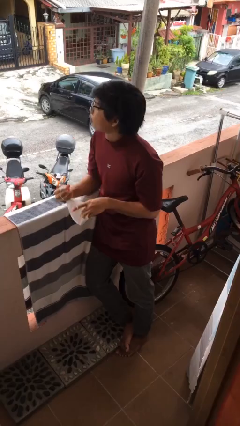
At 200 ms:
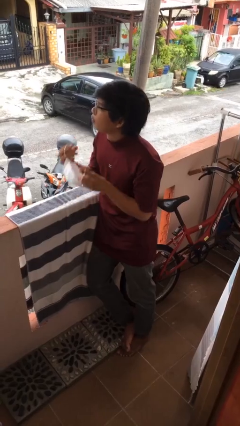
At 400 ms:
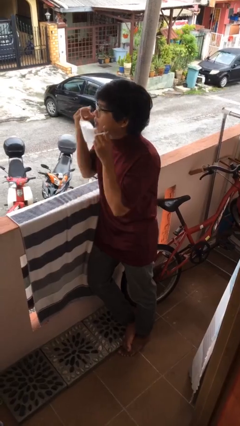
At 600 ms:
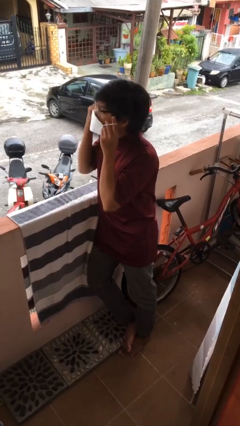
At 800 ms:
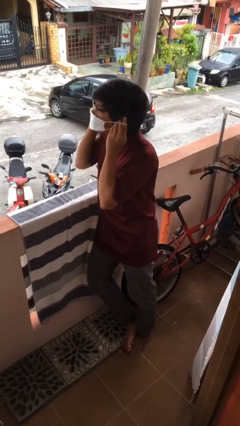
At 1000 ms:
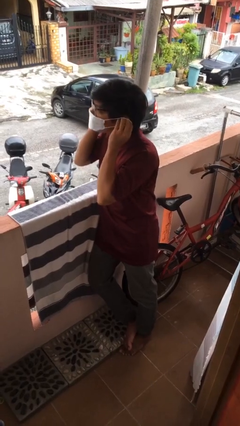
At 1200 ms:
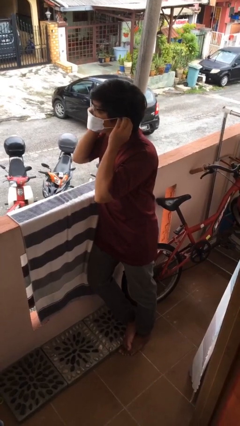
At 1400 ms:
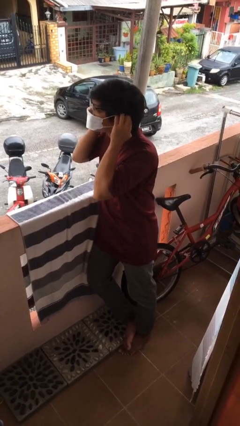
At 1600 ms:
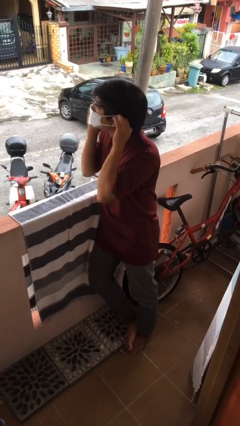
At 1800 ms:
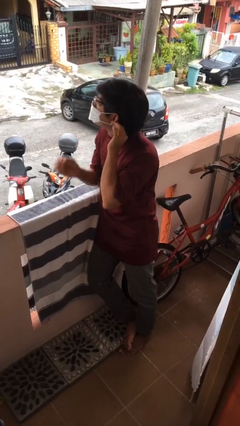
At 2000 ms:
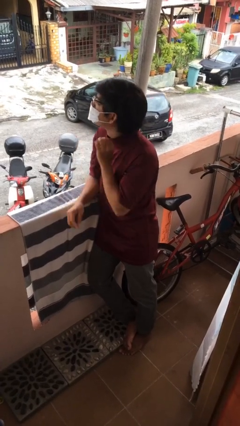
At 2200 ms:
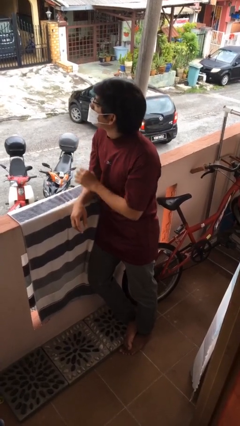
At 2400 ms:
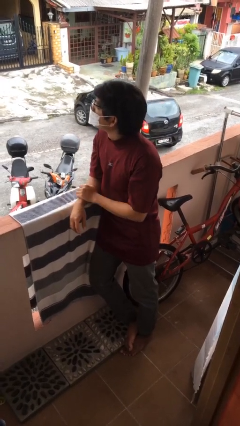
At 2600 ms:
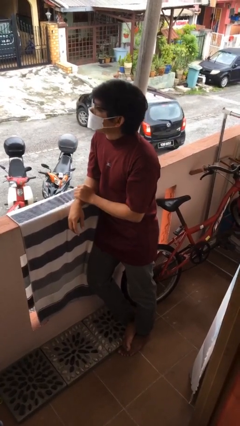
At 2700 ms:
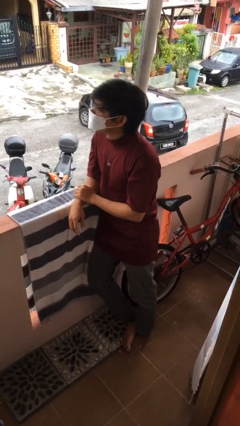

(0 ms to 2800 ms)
person puts on facemask

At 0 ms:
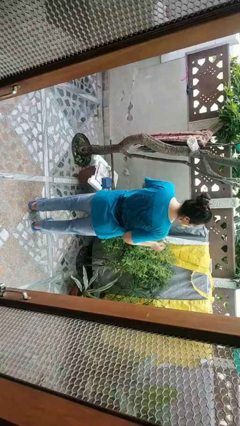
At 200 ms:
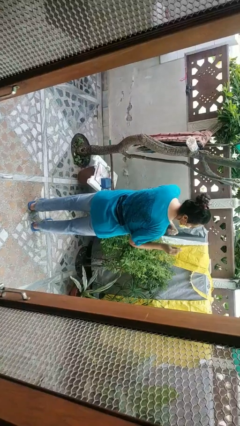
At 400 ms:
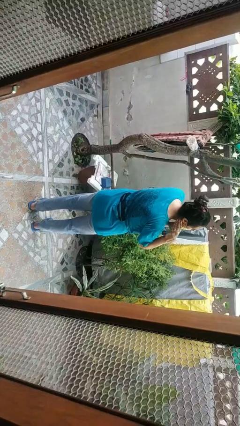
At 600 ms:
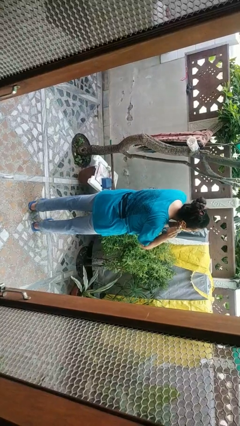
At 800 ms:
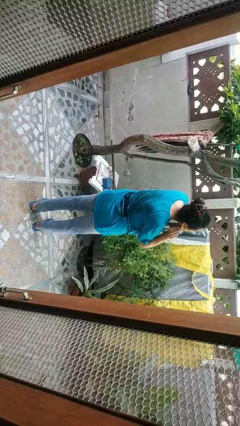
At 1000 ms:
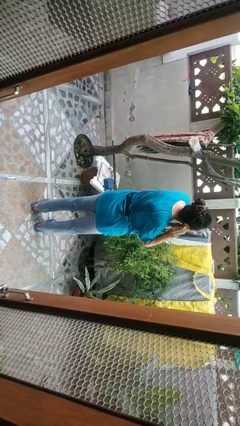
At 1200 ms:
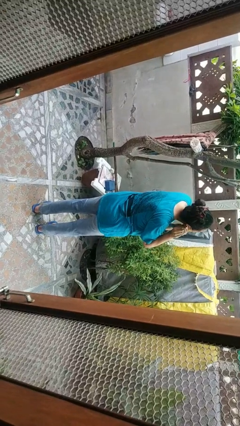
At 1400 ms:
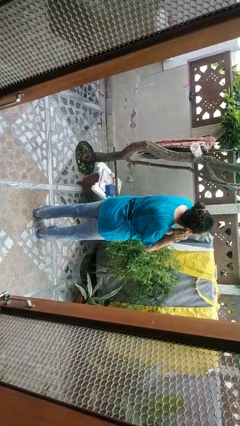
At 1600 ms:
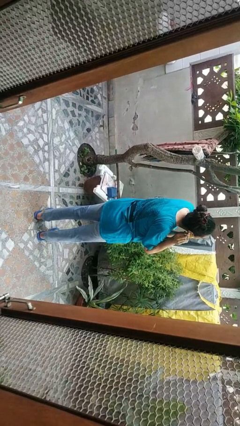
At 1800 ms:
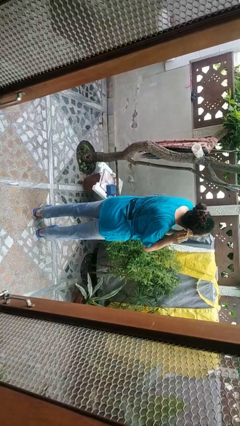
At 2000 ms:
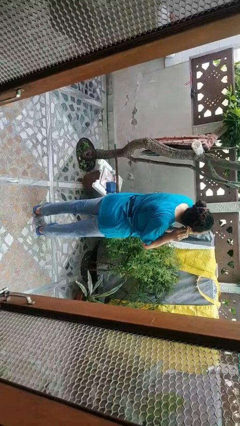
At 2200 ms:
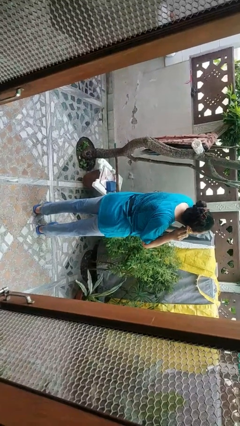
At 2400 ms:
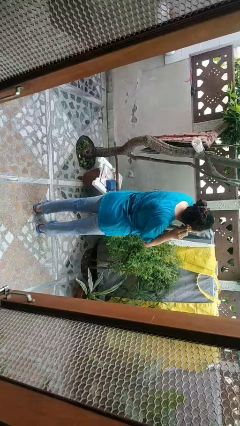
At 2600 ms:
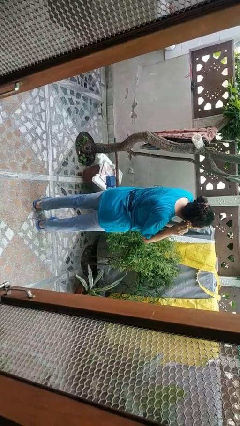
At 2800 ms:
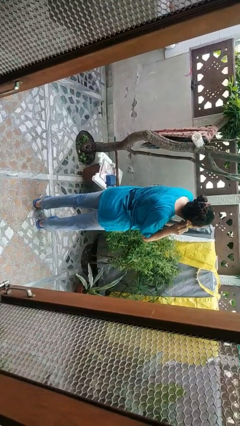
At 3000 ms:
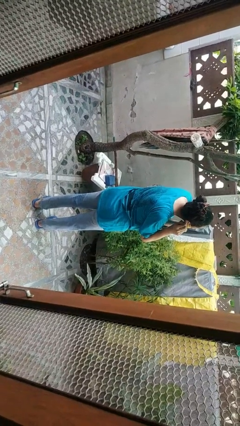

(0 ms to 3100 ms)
person puts on earrings

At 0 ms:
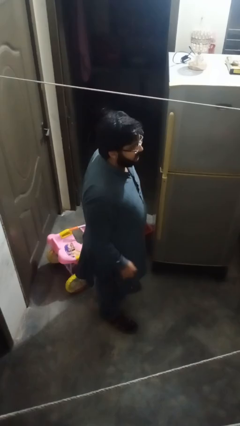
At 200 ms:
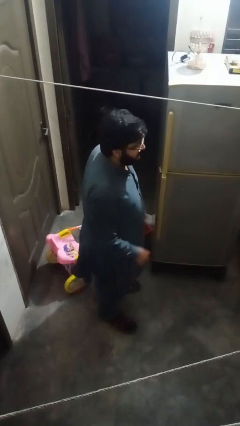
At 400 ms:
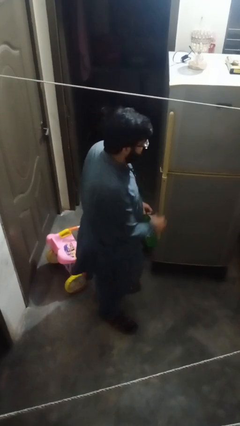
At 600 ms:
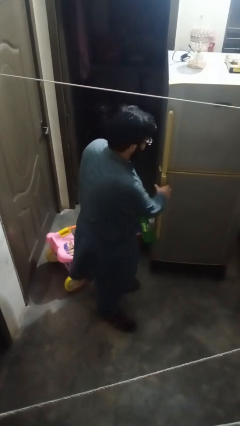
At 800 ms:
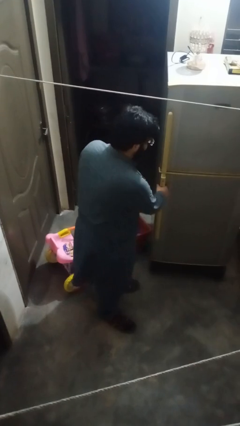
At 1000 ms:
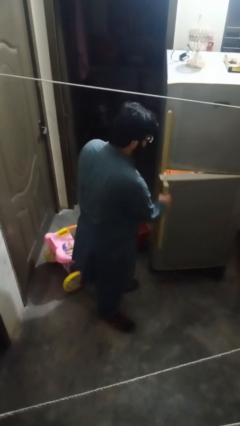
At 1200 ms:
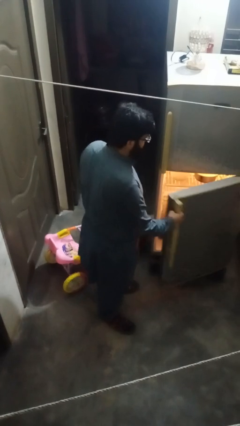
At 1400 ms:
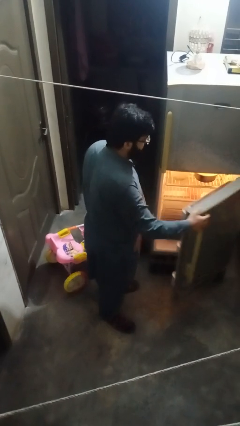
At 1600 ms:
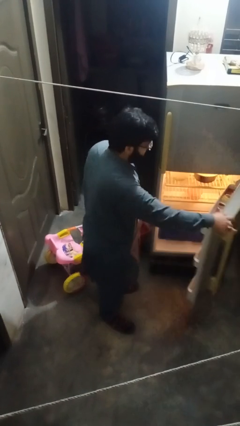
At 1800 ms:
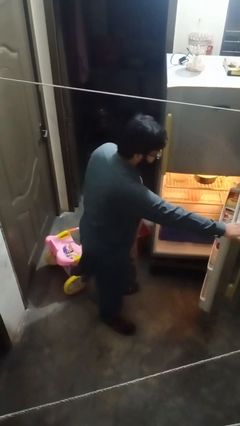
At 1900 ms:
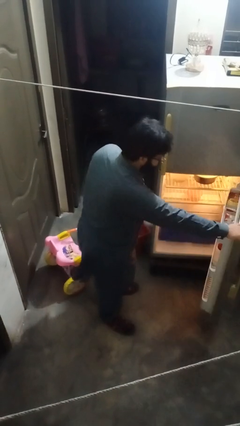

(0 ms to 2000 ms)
person opens refrigerator

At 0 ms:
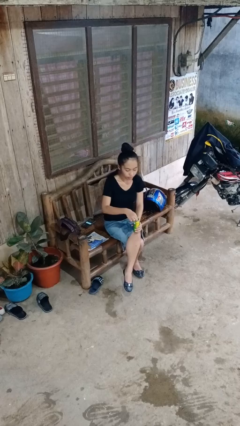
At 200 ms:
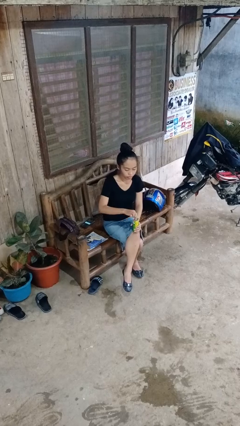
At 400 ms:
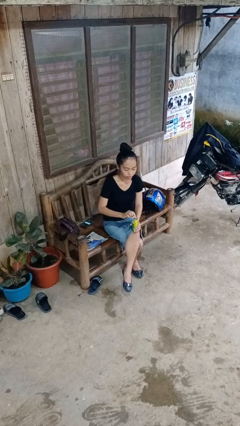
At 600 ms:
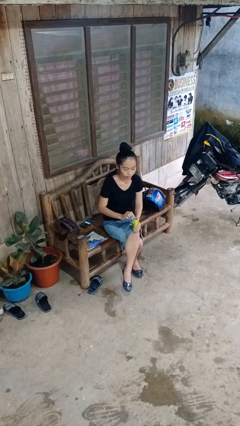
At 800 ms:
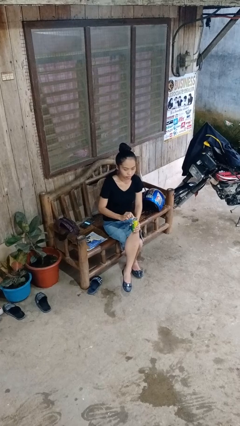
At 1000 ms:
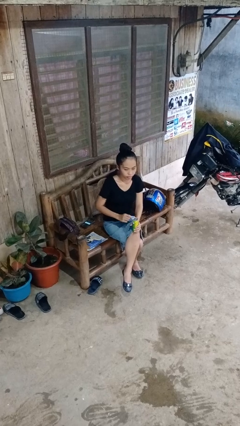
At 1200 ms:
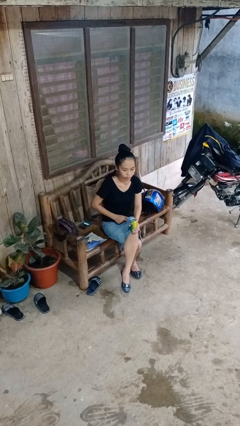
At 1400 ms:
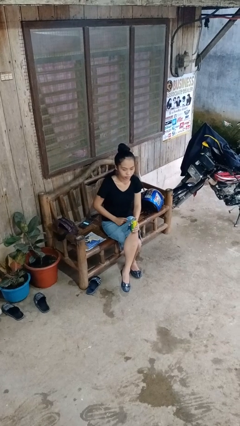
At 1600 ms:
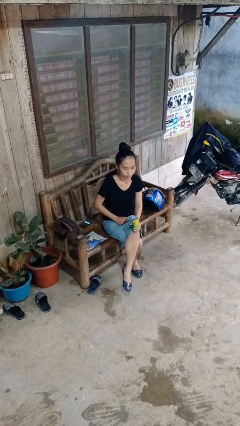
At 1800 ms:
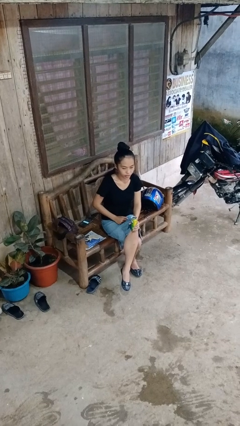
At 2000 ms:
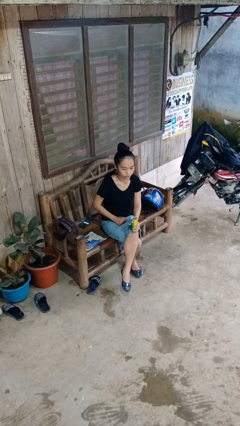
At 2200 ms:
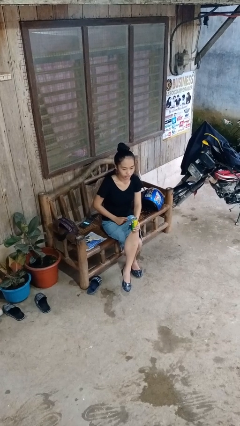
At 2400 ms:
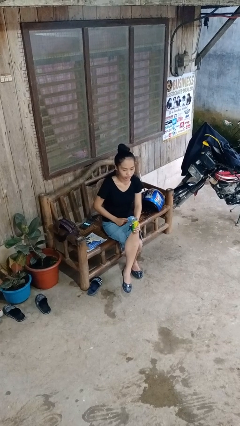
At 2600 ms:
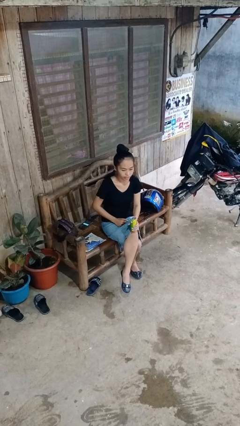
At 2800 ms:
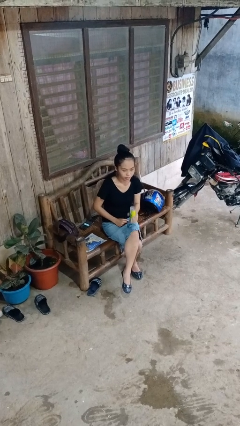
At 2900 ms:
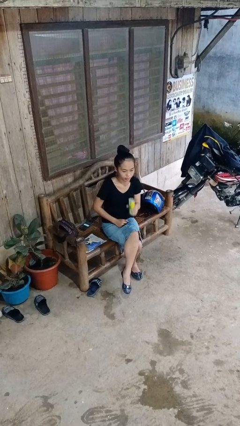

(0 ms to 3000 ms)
person opens beverage can

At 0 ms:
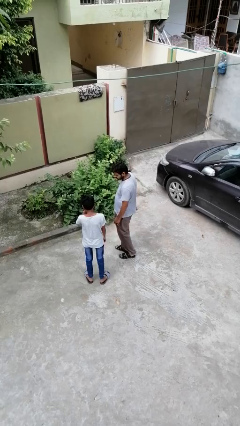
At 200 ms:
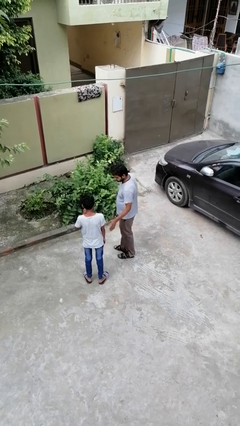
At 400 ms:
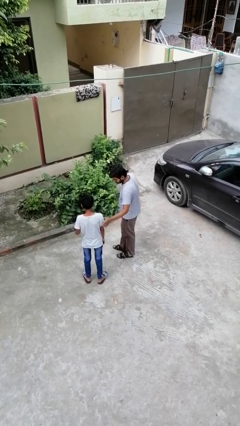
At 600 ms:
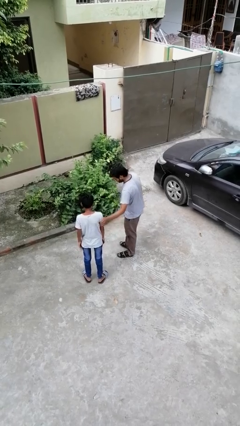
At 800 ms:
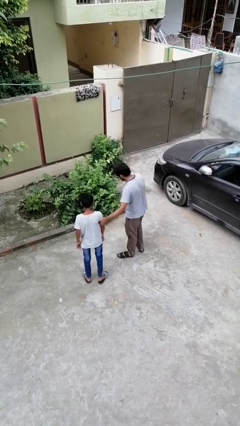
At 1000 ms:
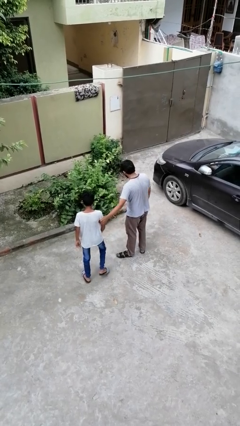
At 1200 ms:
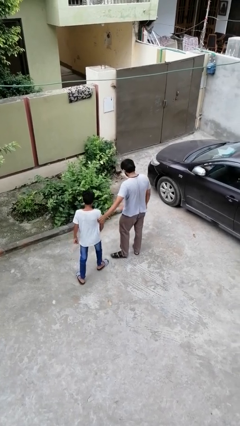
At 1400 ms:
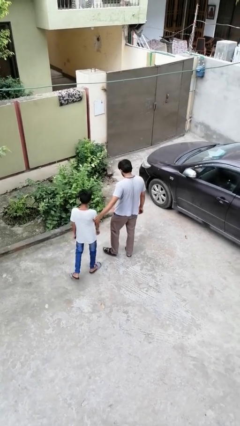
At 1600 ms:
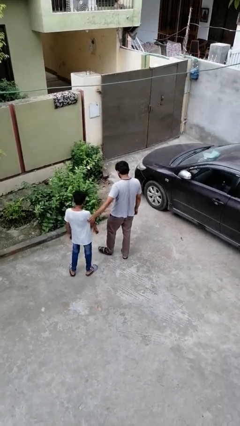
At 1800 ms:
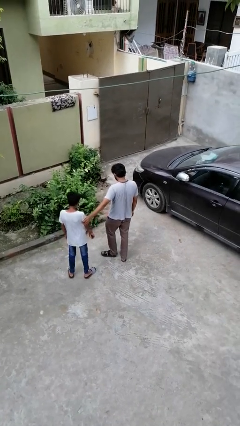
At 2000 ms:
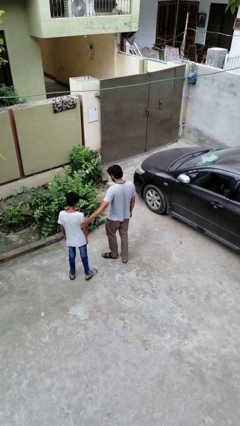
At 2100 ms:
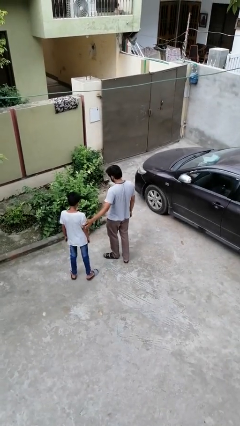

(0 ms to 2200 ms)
person grabs person by bicep

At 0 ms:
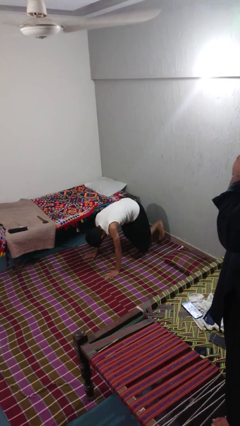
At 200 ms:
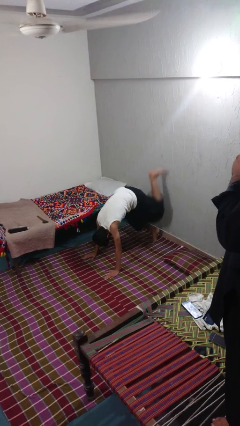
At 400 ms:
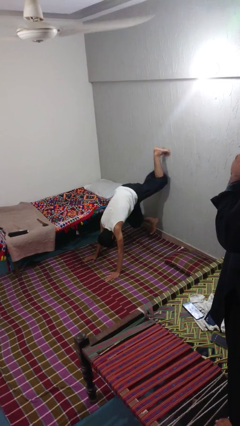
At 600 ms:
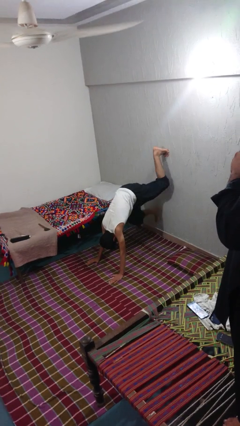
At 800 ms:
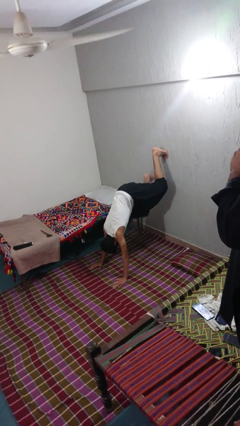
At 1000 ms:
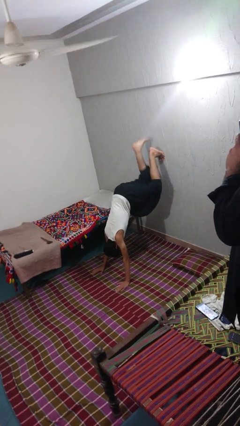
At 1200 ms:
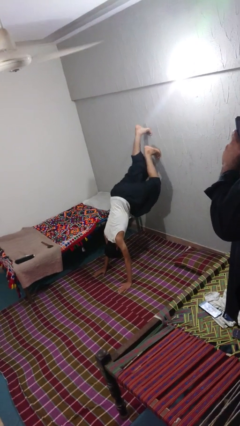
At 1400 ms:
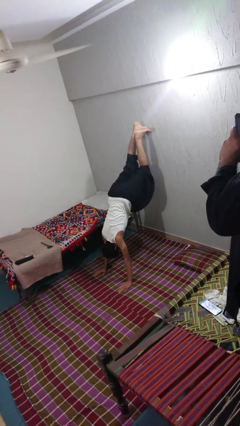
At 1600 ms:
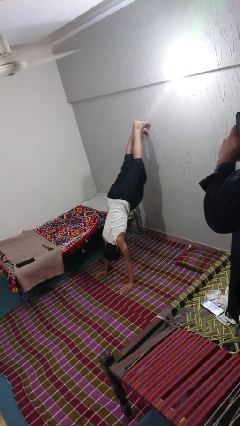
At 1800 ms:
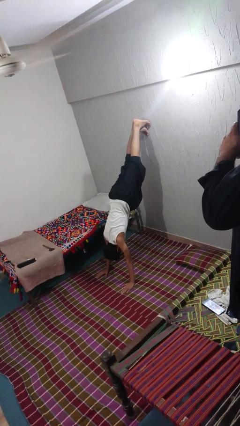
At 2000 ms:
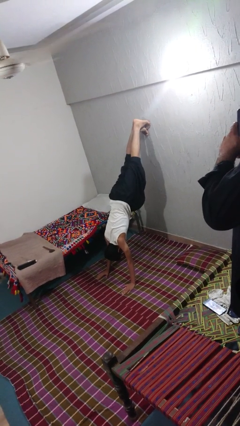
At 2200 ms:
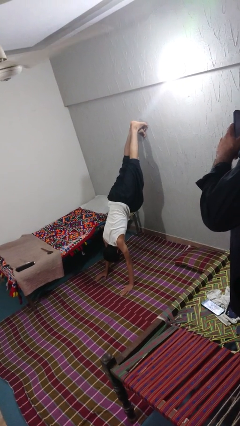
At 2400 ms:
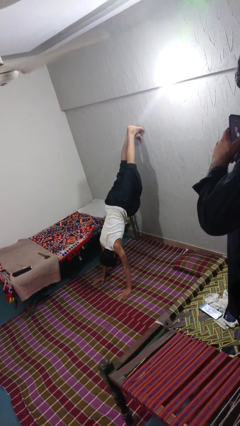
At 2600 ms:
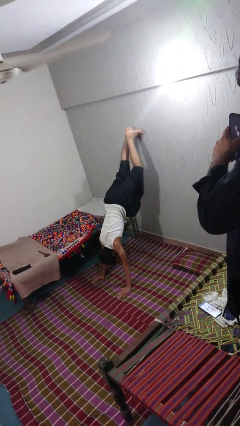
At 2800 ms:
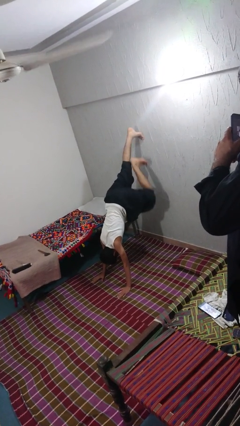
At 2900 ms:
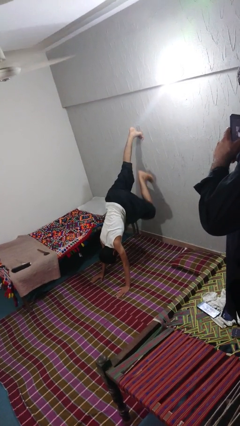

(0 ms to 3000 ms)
person handstand

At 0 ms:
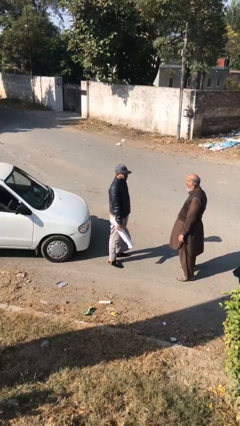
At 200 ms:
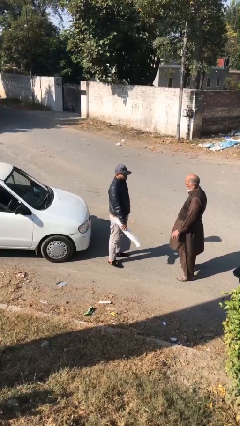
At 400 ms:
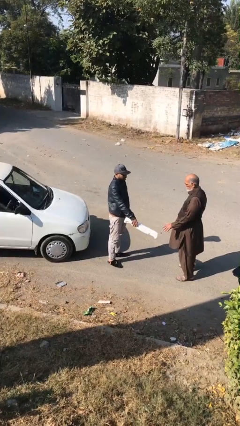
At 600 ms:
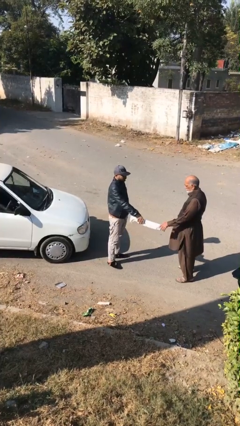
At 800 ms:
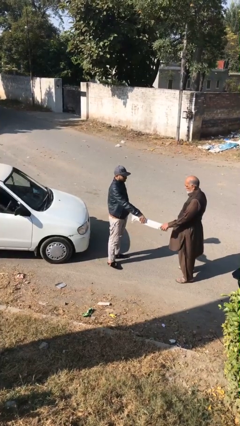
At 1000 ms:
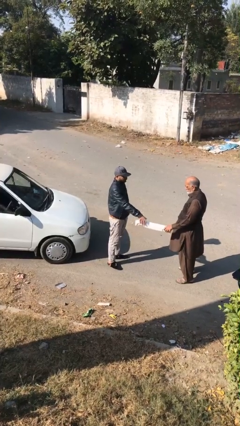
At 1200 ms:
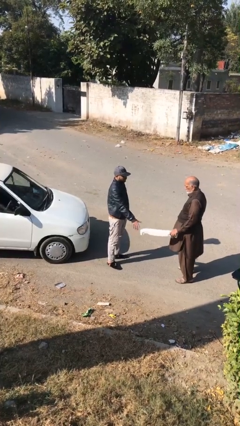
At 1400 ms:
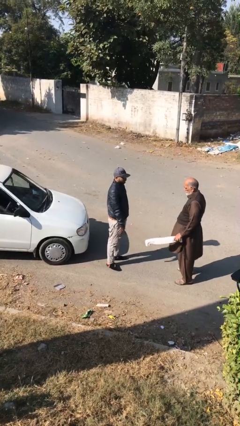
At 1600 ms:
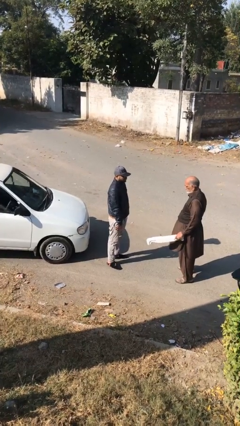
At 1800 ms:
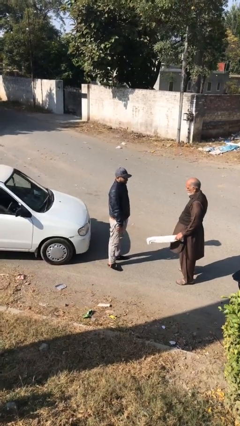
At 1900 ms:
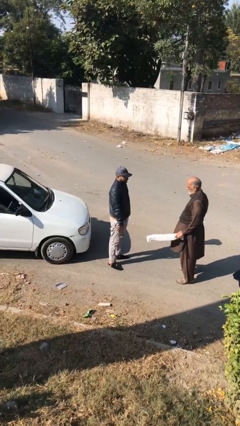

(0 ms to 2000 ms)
person transfers object to person
